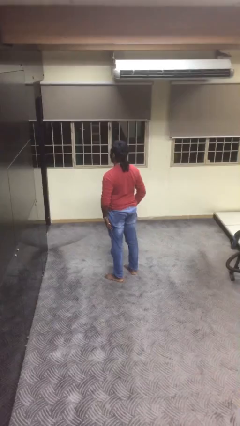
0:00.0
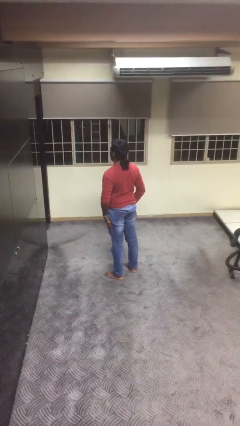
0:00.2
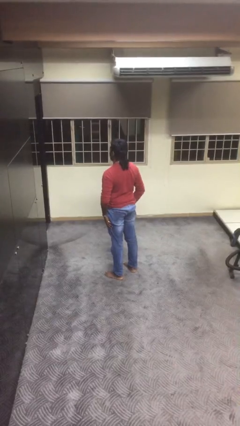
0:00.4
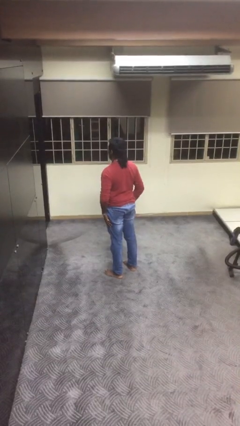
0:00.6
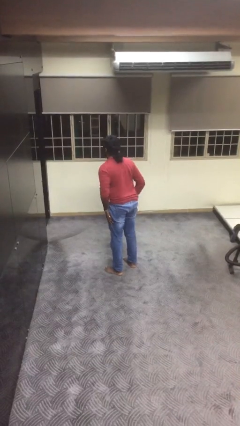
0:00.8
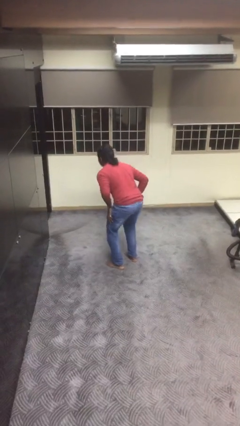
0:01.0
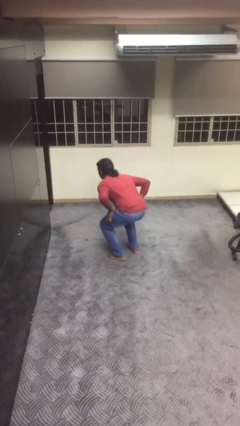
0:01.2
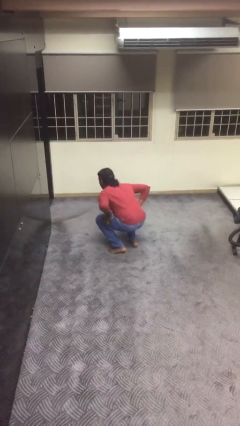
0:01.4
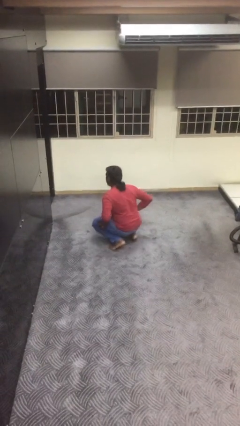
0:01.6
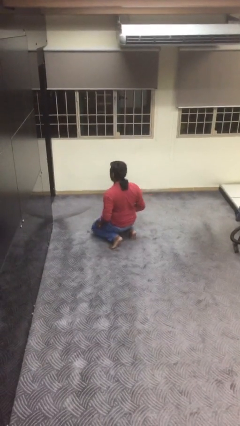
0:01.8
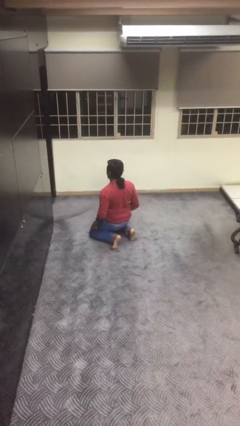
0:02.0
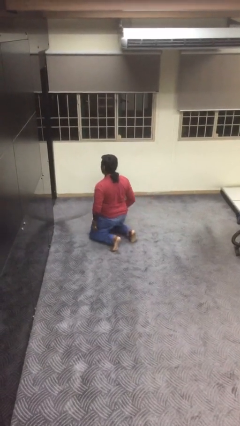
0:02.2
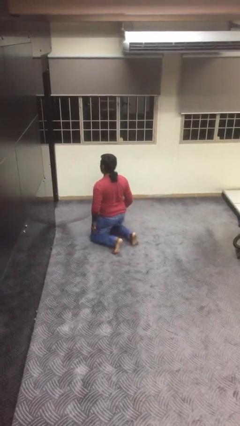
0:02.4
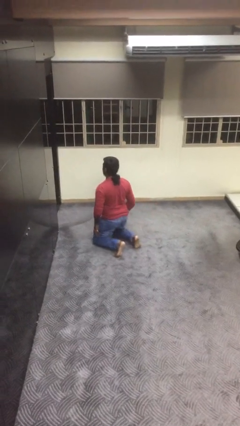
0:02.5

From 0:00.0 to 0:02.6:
person kneels

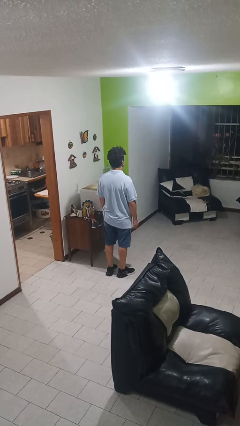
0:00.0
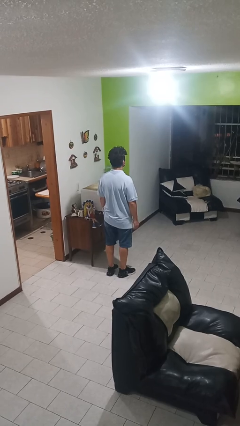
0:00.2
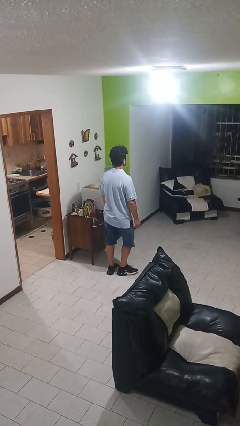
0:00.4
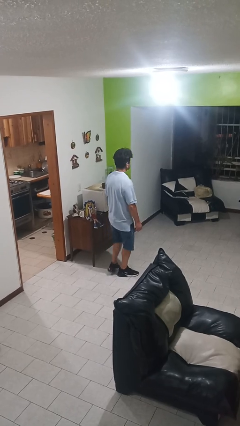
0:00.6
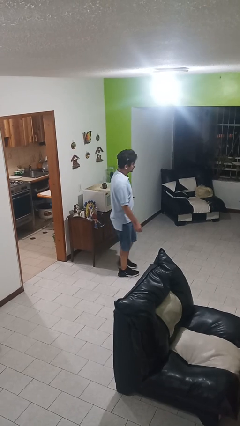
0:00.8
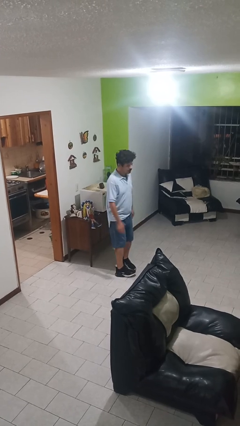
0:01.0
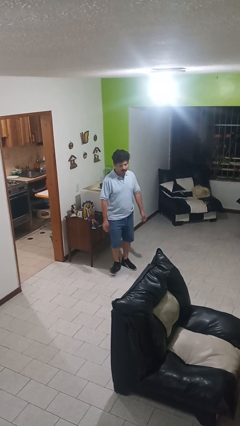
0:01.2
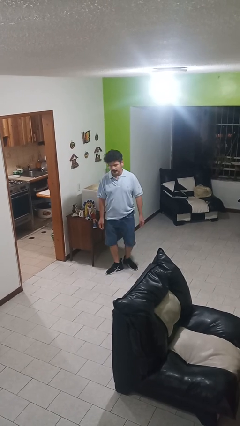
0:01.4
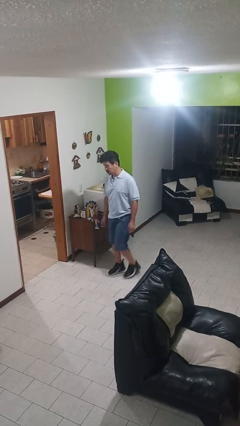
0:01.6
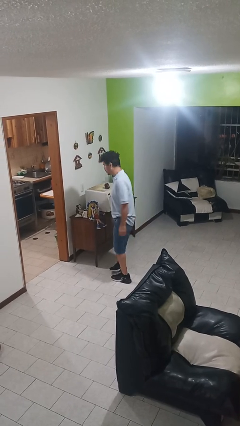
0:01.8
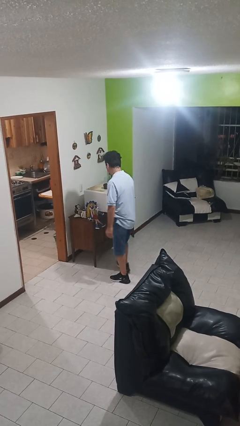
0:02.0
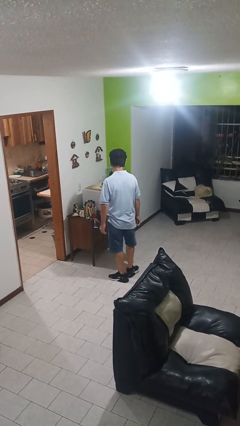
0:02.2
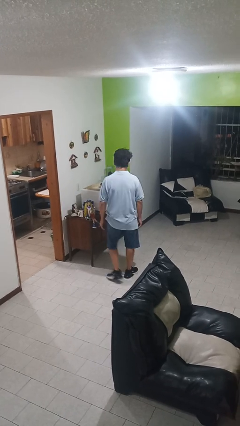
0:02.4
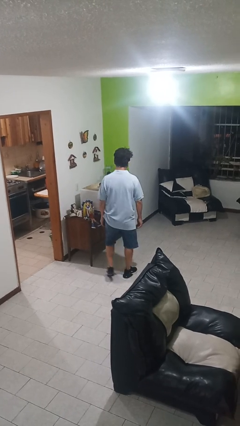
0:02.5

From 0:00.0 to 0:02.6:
person twirls

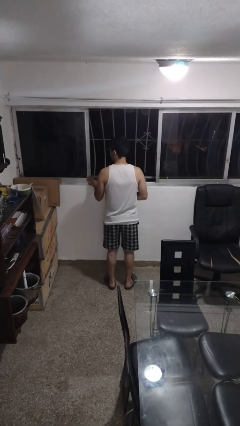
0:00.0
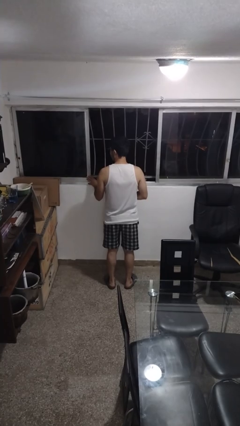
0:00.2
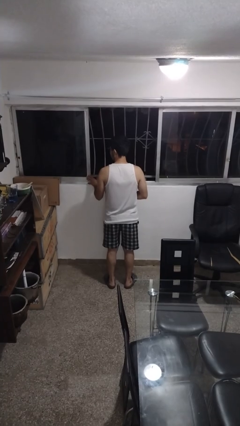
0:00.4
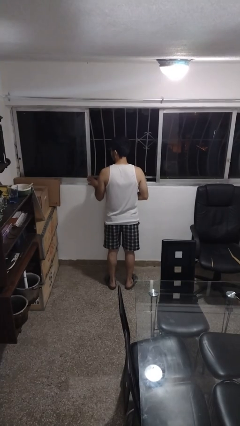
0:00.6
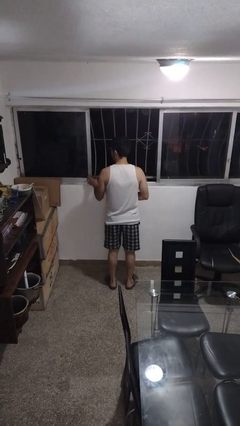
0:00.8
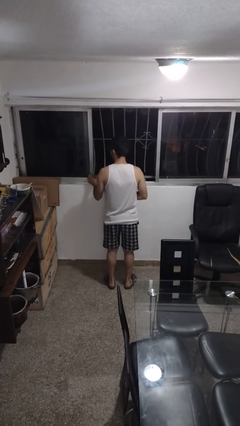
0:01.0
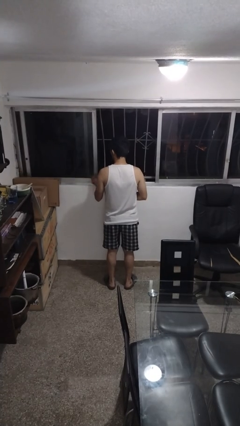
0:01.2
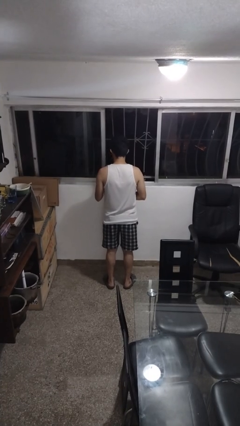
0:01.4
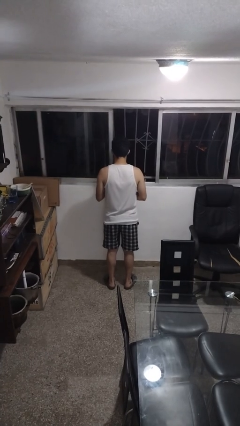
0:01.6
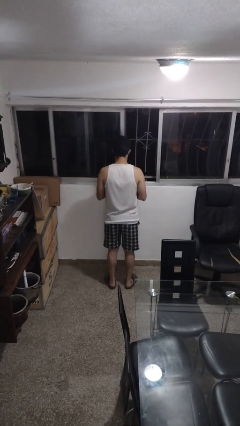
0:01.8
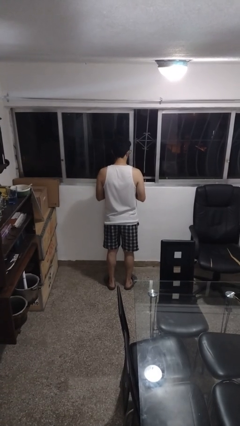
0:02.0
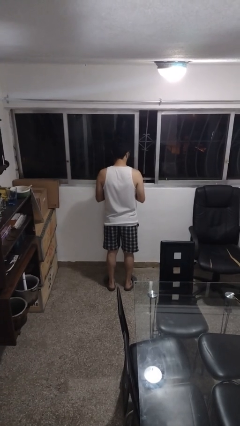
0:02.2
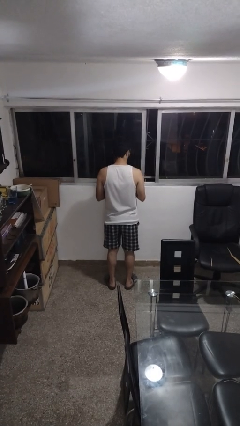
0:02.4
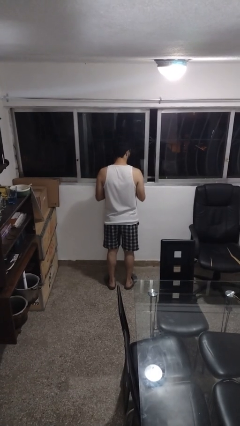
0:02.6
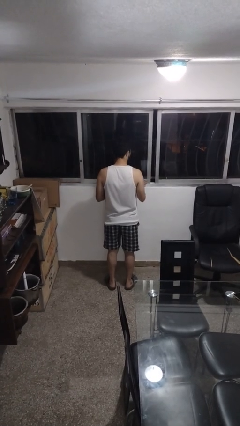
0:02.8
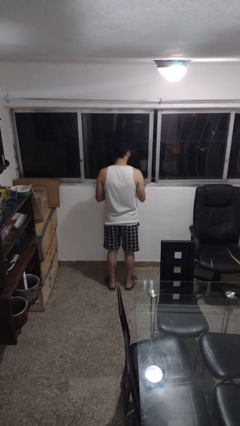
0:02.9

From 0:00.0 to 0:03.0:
person closes home window

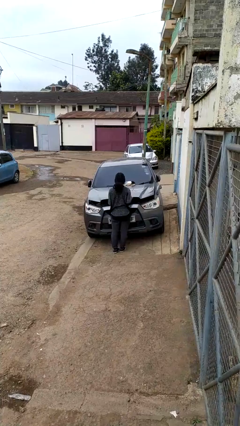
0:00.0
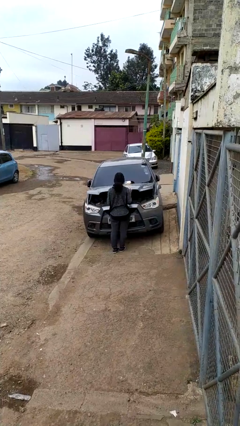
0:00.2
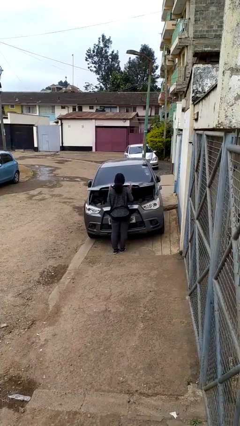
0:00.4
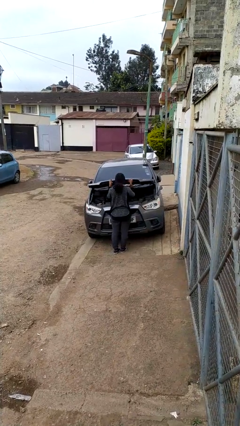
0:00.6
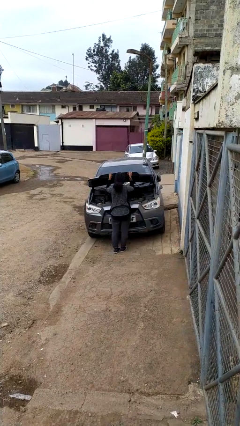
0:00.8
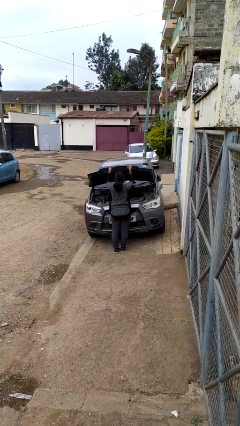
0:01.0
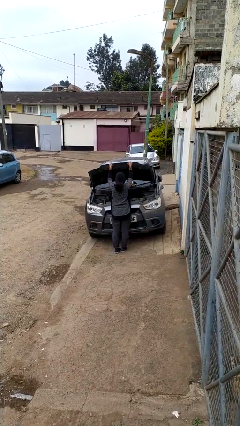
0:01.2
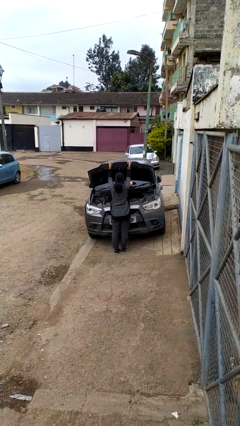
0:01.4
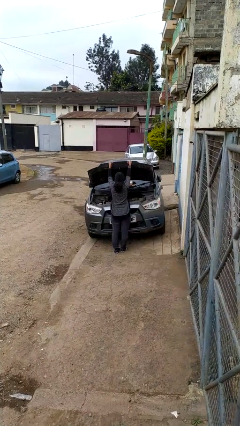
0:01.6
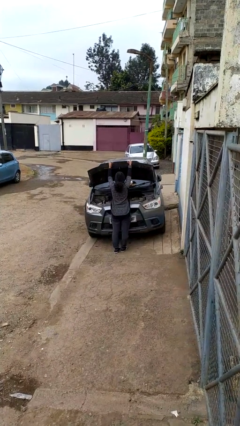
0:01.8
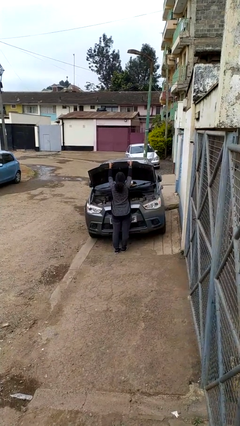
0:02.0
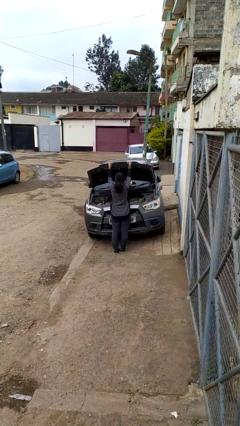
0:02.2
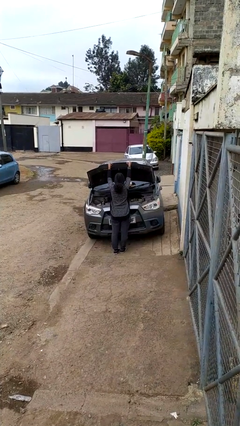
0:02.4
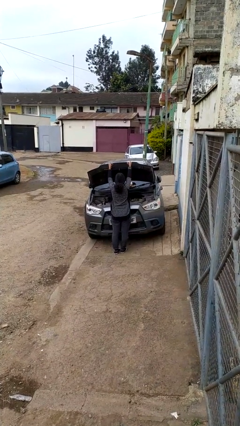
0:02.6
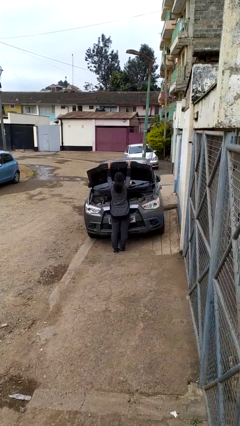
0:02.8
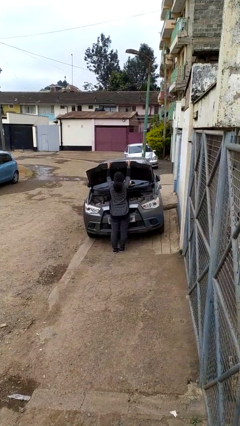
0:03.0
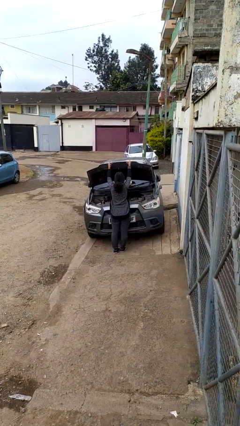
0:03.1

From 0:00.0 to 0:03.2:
person opens car hood

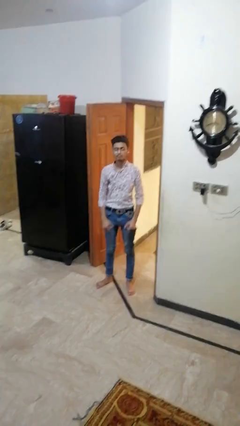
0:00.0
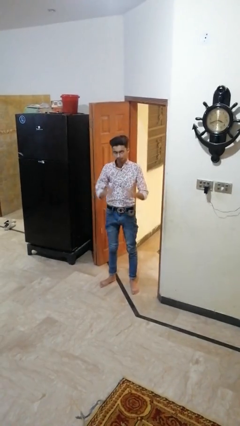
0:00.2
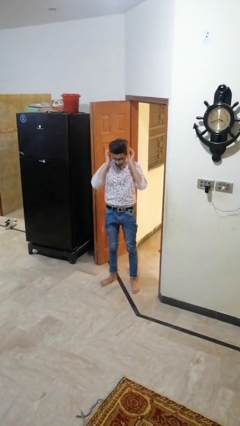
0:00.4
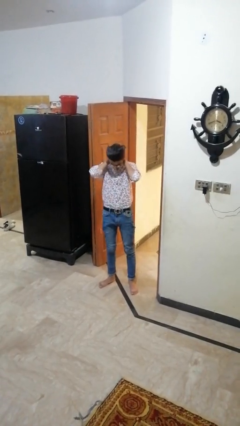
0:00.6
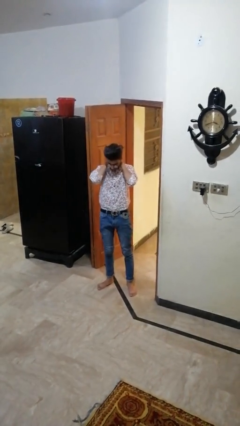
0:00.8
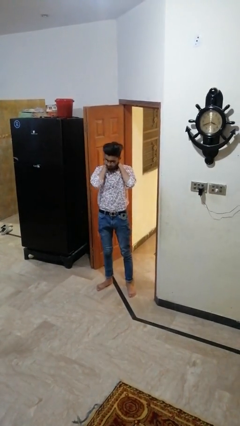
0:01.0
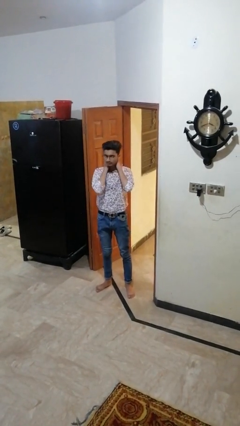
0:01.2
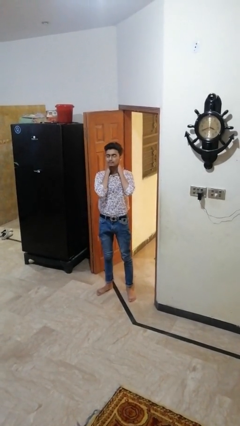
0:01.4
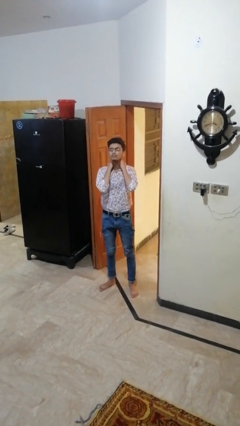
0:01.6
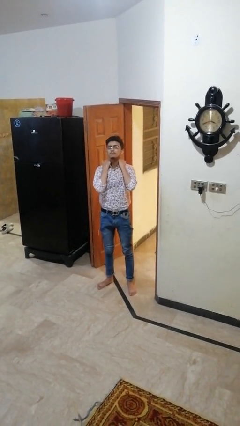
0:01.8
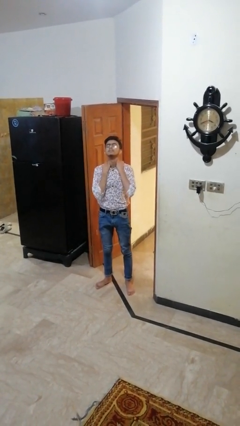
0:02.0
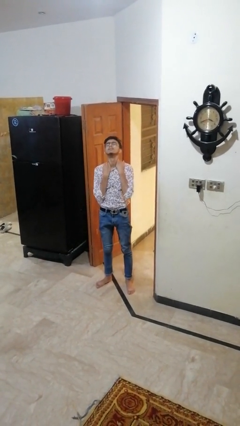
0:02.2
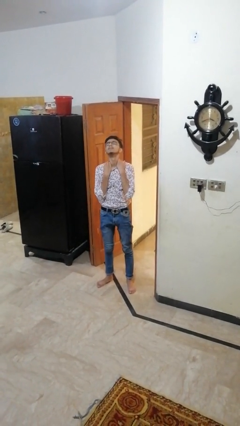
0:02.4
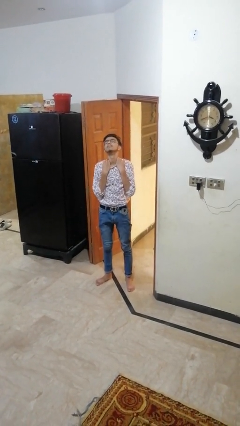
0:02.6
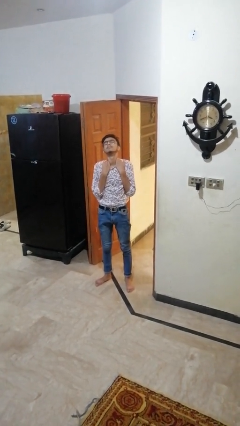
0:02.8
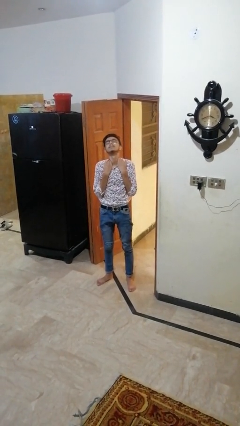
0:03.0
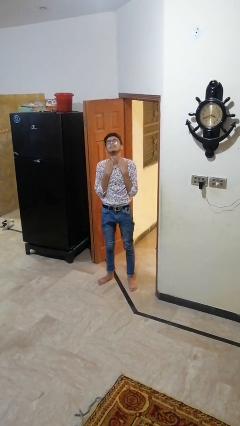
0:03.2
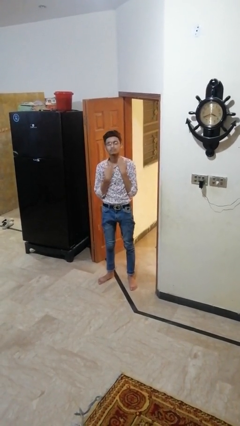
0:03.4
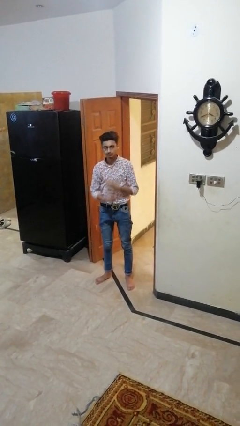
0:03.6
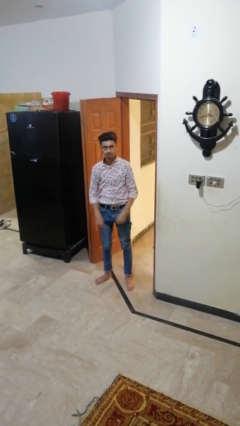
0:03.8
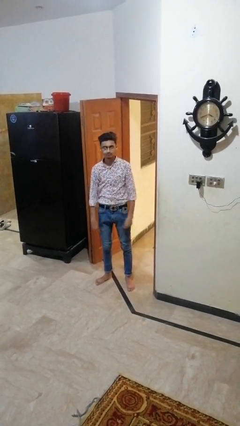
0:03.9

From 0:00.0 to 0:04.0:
person rubs neck

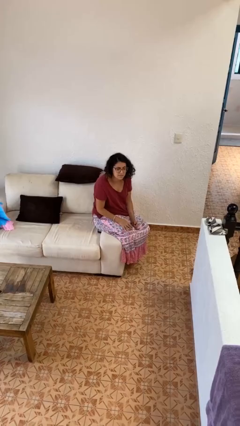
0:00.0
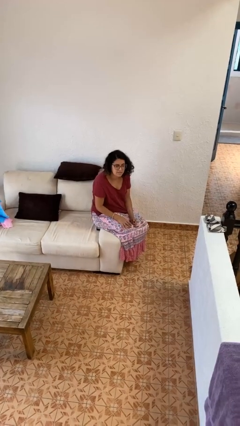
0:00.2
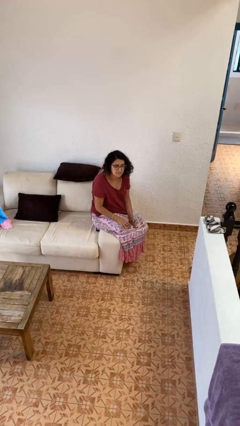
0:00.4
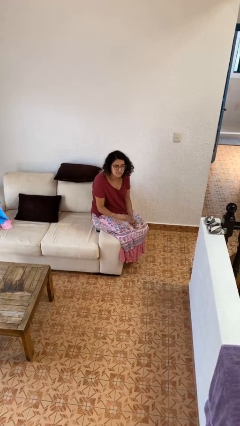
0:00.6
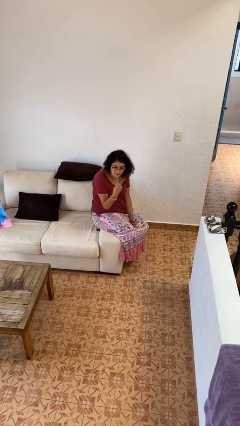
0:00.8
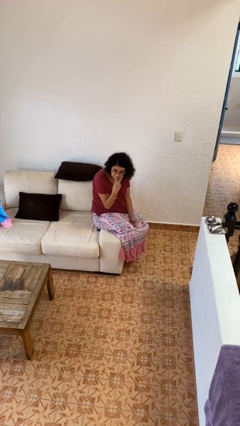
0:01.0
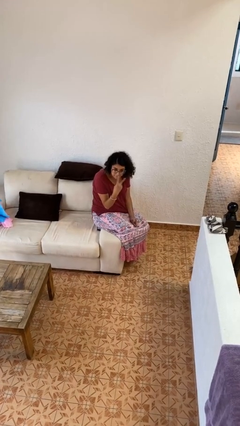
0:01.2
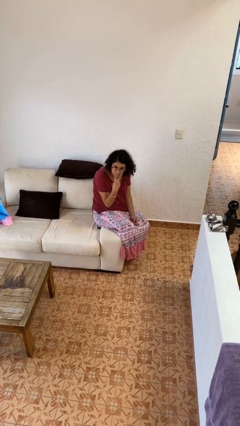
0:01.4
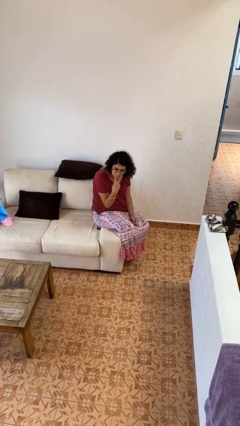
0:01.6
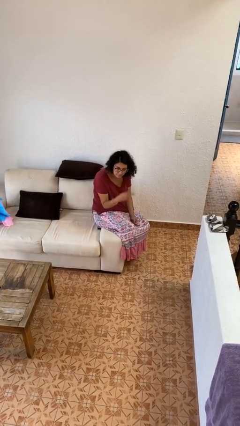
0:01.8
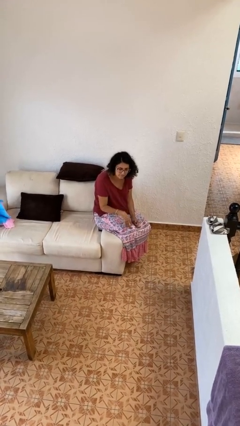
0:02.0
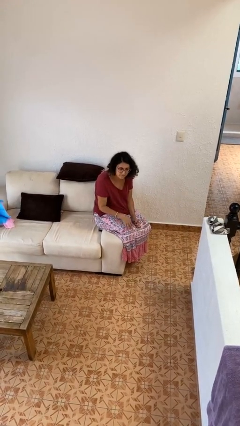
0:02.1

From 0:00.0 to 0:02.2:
person gestures watch closely

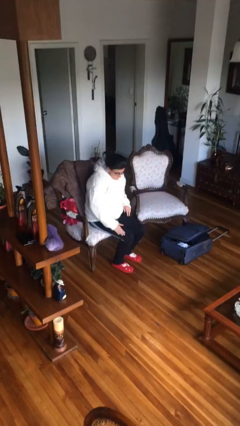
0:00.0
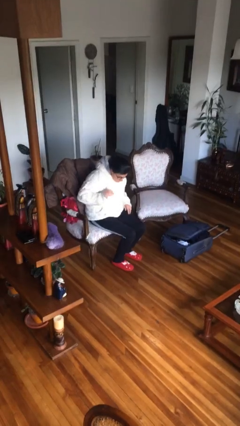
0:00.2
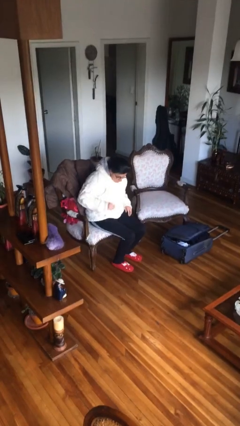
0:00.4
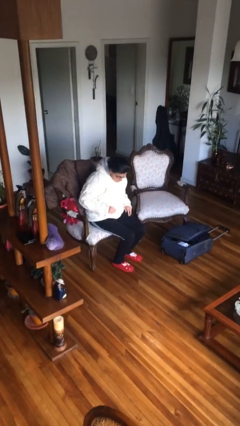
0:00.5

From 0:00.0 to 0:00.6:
person swats bug
